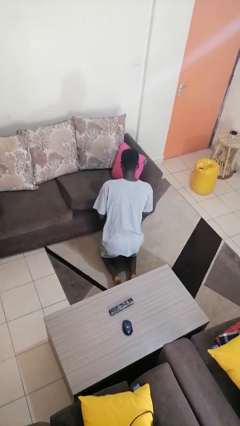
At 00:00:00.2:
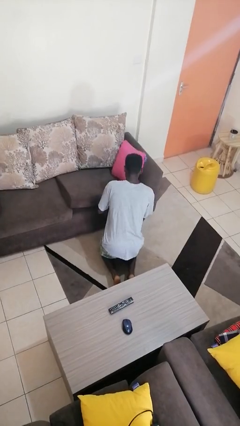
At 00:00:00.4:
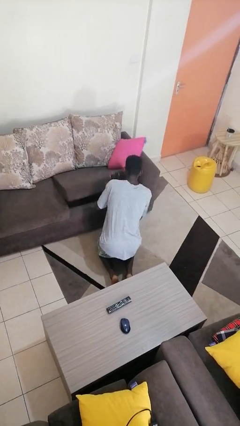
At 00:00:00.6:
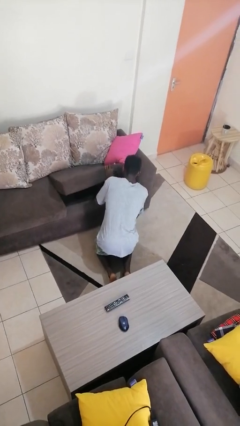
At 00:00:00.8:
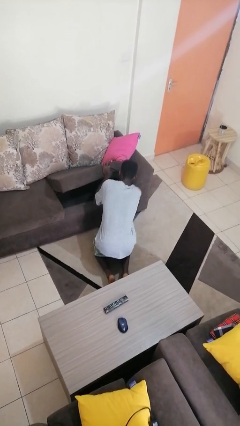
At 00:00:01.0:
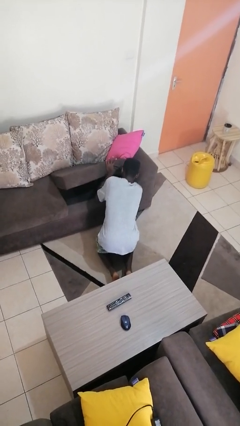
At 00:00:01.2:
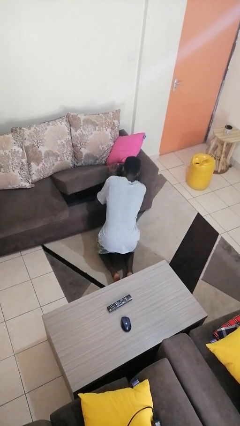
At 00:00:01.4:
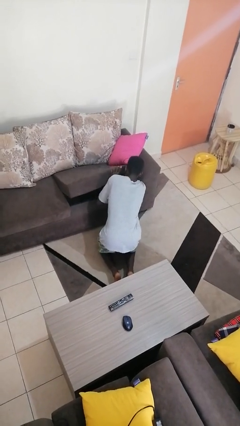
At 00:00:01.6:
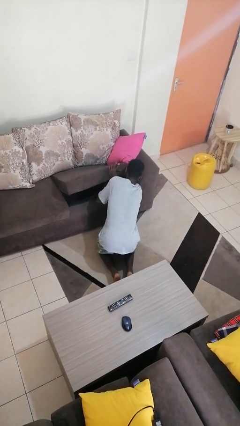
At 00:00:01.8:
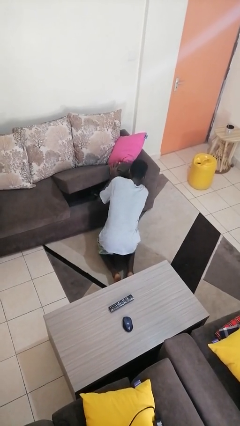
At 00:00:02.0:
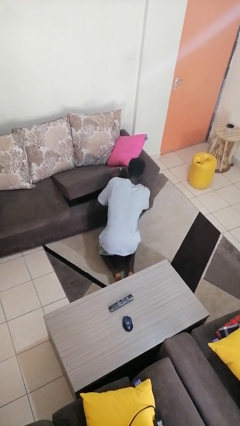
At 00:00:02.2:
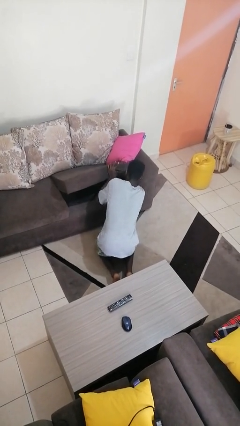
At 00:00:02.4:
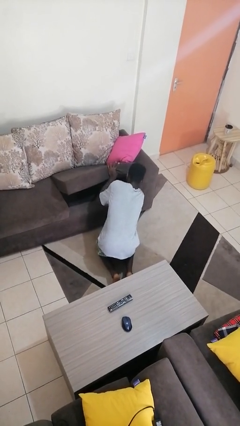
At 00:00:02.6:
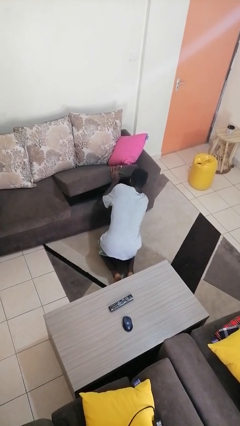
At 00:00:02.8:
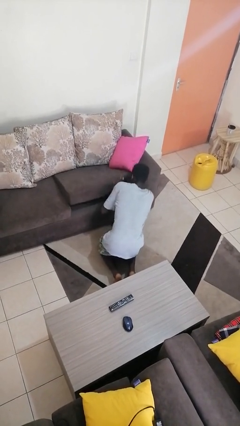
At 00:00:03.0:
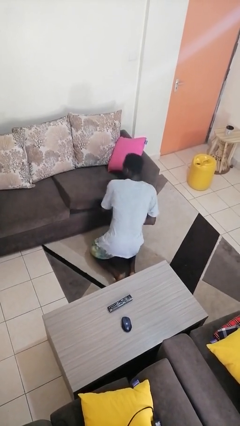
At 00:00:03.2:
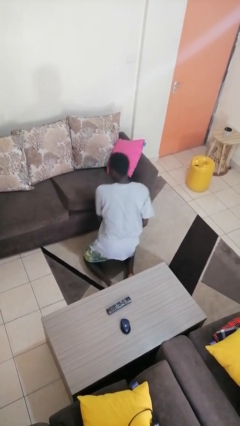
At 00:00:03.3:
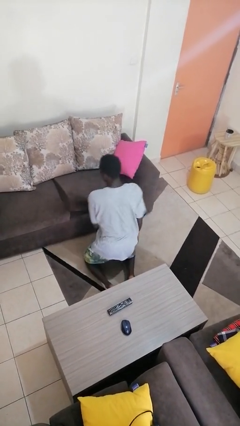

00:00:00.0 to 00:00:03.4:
person searches under couch

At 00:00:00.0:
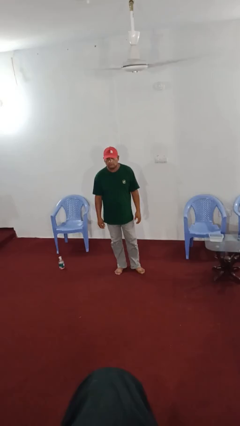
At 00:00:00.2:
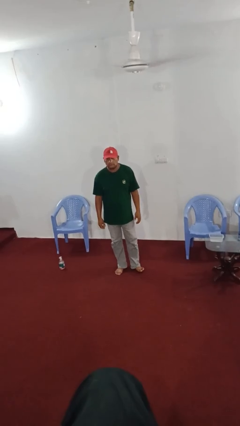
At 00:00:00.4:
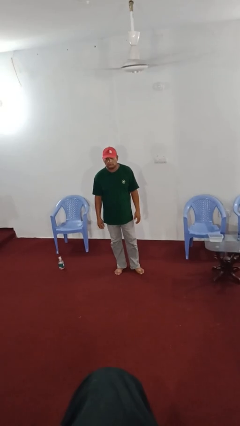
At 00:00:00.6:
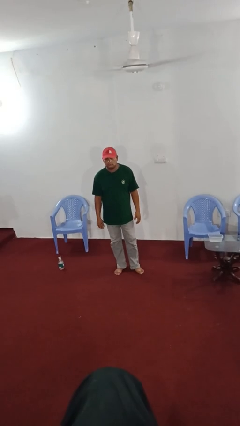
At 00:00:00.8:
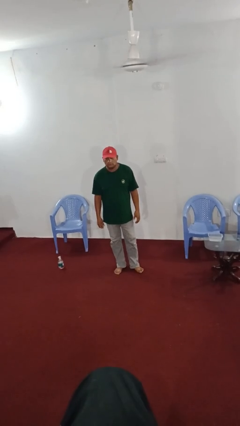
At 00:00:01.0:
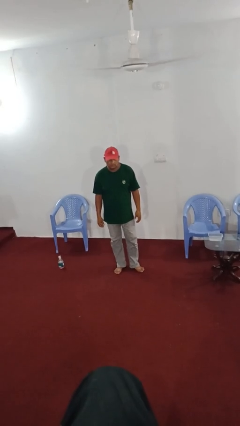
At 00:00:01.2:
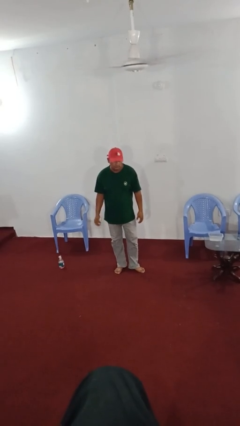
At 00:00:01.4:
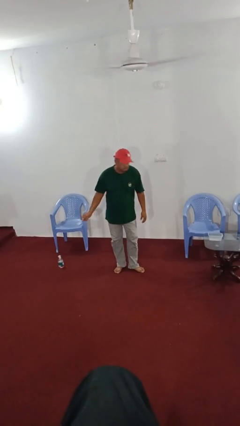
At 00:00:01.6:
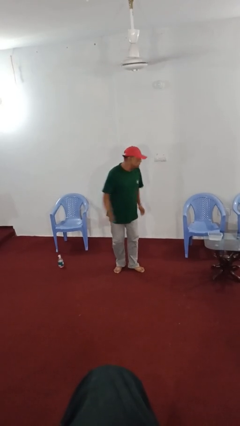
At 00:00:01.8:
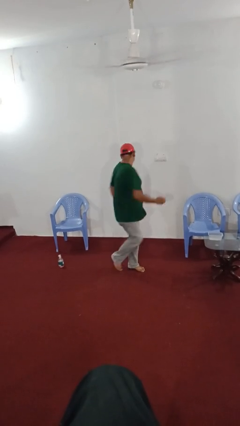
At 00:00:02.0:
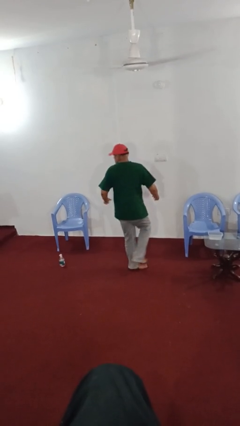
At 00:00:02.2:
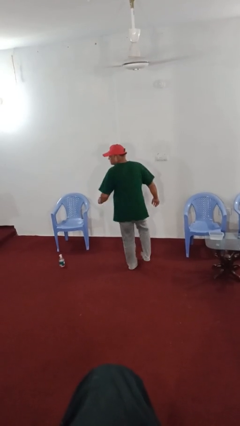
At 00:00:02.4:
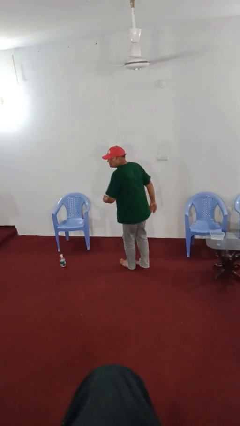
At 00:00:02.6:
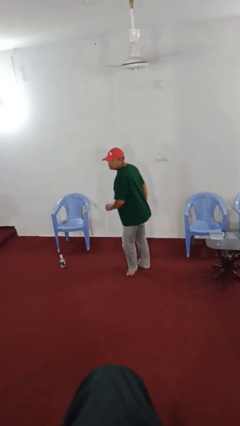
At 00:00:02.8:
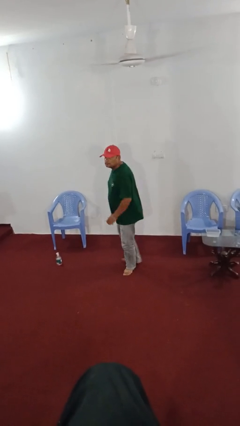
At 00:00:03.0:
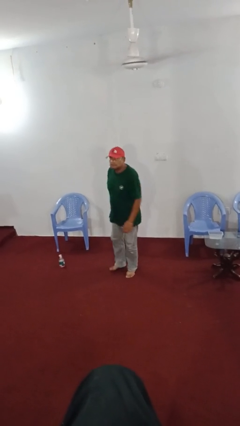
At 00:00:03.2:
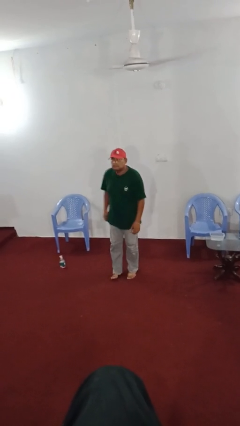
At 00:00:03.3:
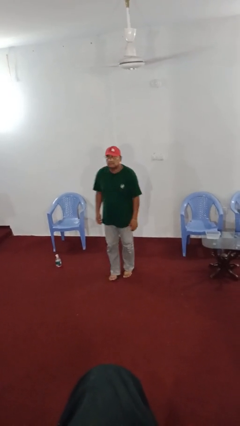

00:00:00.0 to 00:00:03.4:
person twirls

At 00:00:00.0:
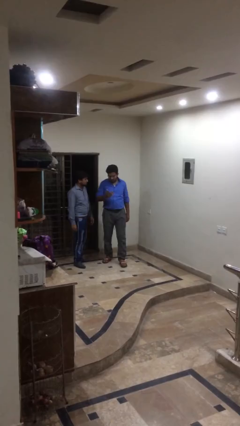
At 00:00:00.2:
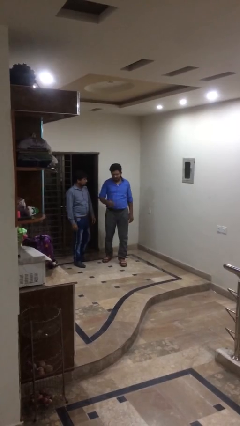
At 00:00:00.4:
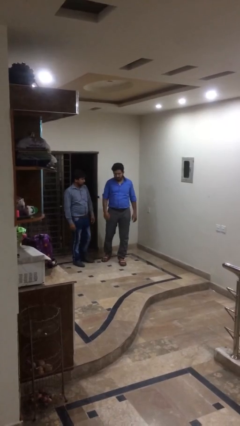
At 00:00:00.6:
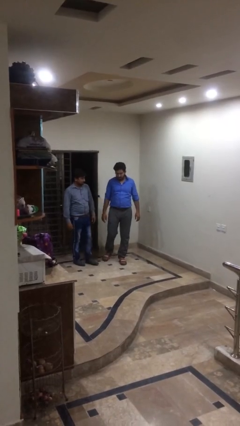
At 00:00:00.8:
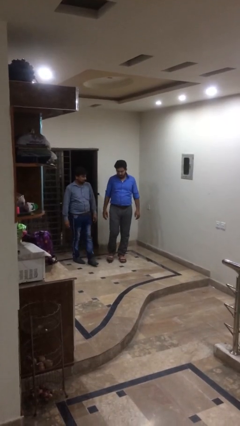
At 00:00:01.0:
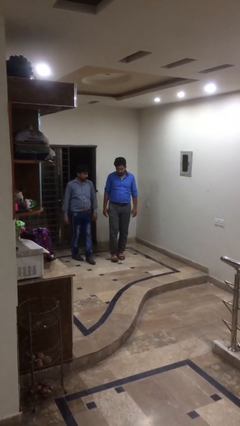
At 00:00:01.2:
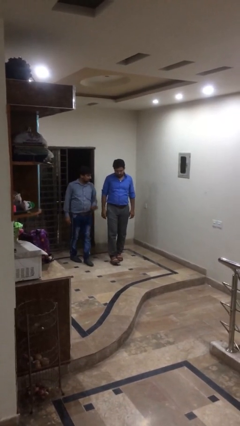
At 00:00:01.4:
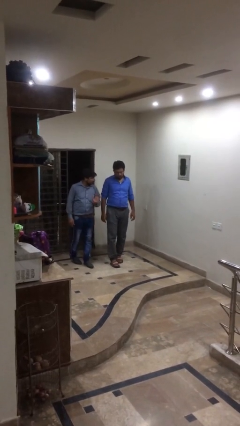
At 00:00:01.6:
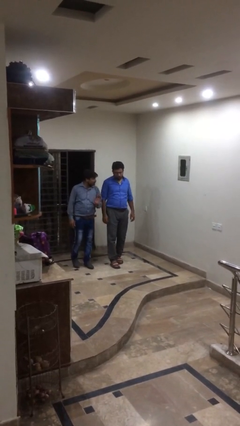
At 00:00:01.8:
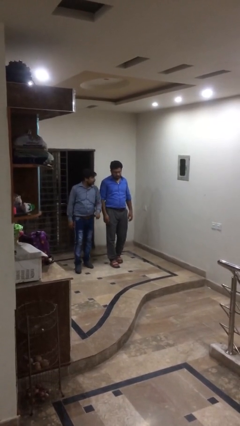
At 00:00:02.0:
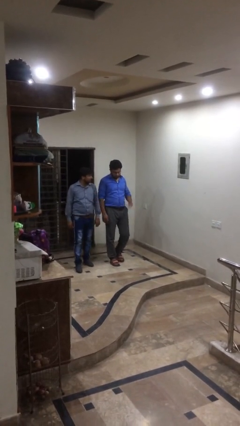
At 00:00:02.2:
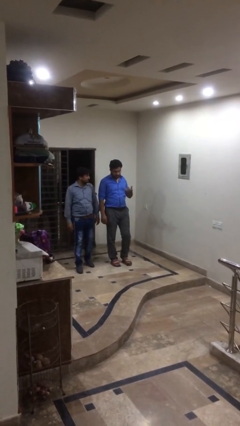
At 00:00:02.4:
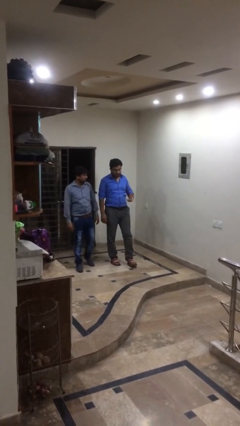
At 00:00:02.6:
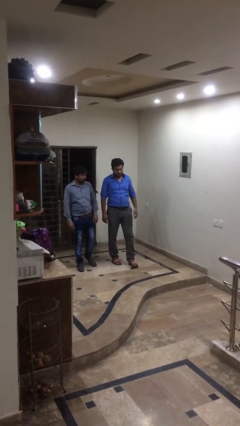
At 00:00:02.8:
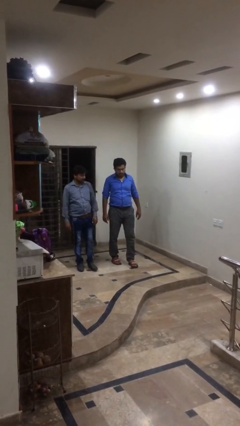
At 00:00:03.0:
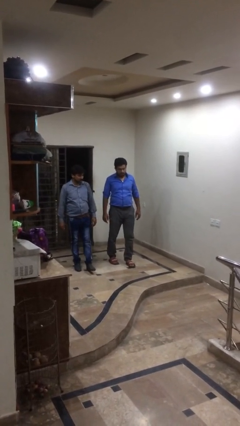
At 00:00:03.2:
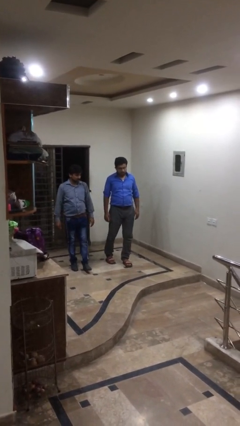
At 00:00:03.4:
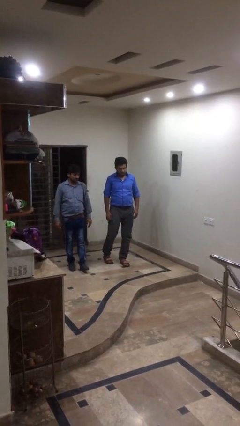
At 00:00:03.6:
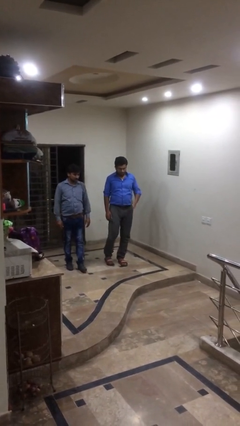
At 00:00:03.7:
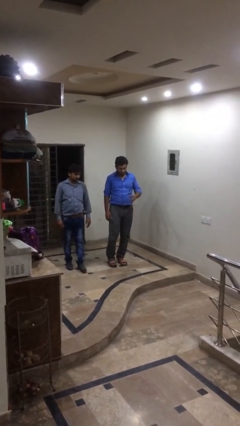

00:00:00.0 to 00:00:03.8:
person talks to person

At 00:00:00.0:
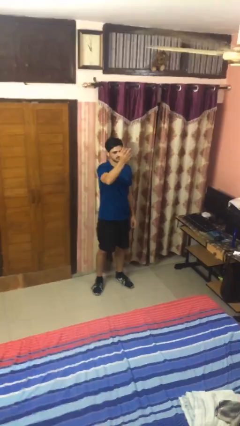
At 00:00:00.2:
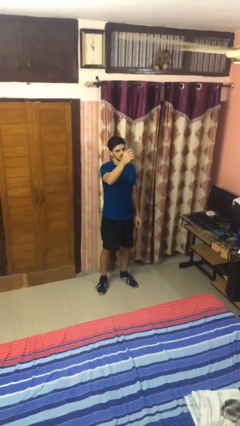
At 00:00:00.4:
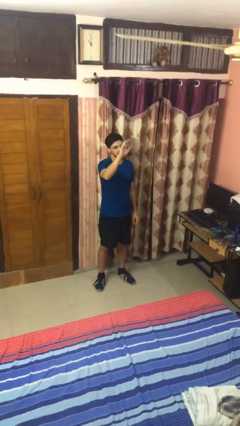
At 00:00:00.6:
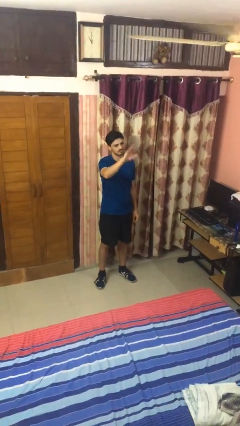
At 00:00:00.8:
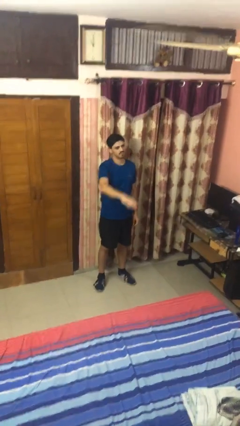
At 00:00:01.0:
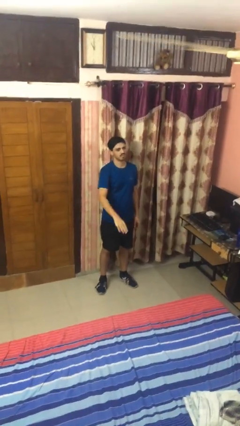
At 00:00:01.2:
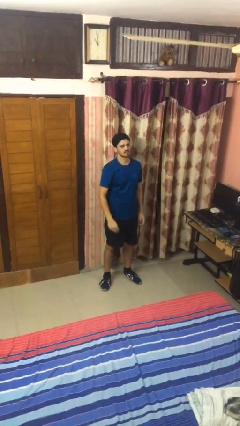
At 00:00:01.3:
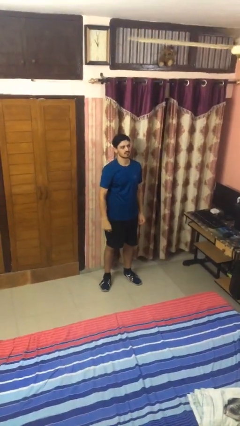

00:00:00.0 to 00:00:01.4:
person gestures swipe down

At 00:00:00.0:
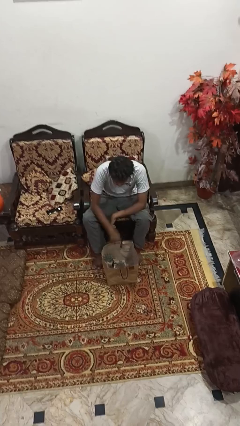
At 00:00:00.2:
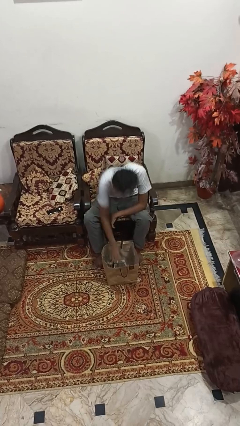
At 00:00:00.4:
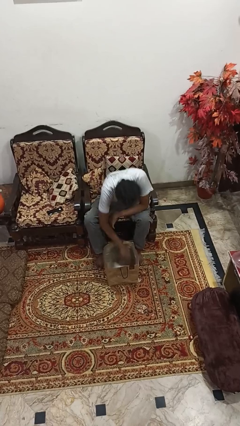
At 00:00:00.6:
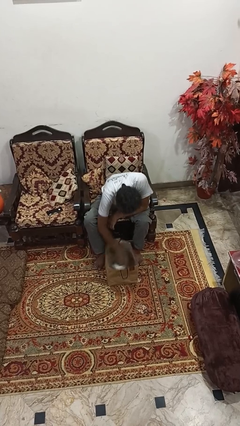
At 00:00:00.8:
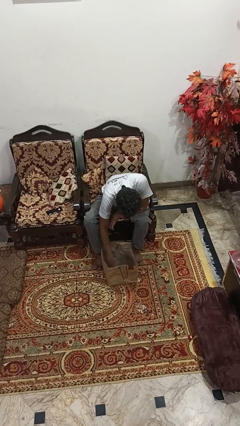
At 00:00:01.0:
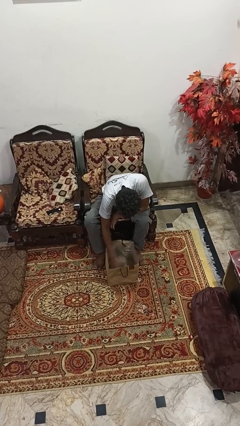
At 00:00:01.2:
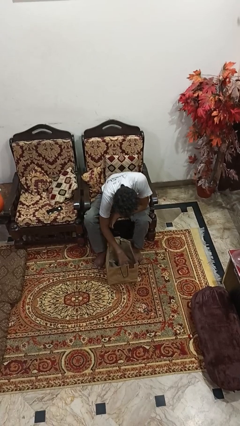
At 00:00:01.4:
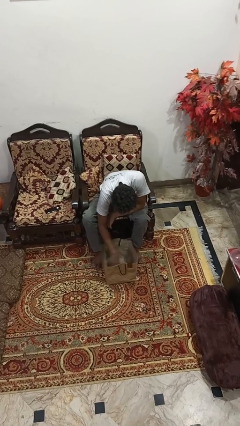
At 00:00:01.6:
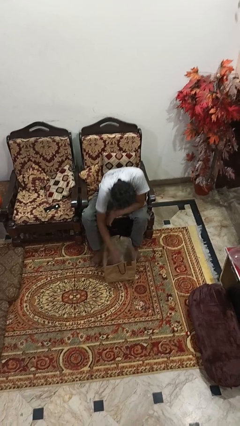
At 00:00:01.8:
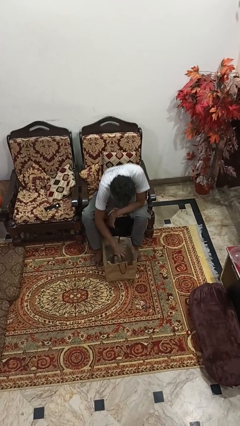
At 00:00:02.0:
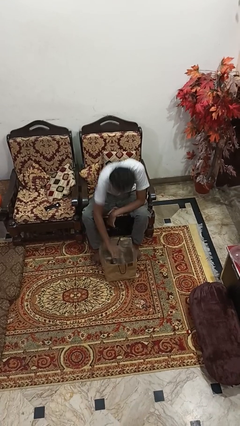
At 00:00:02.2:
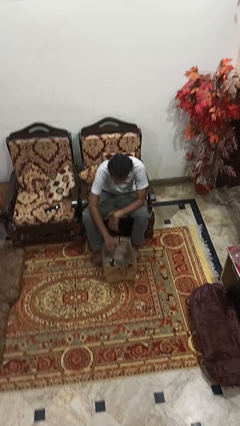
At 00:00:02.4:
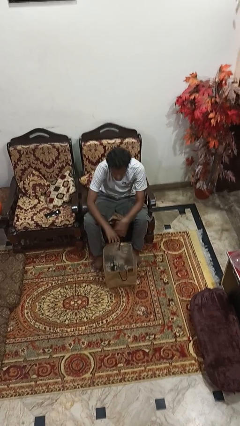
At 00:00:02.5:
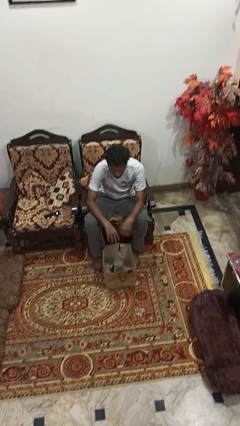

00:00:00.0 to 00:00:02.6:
person searches in bag

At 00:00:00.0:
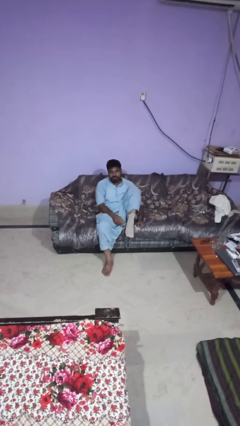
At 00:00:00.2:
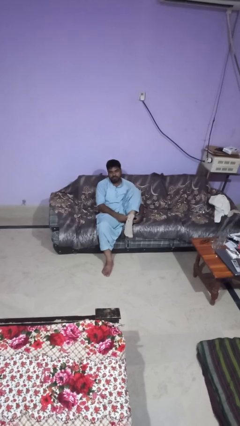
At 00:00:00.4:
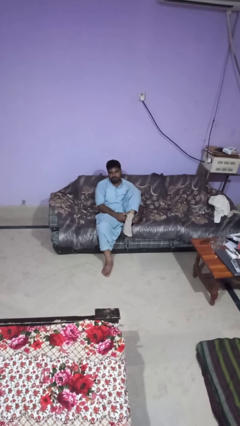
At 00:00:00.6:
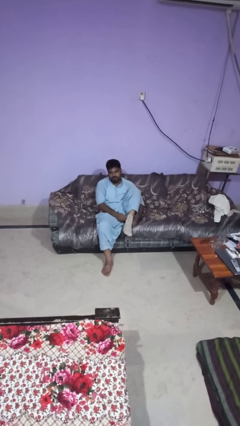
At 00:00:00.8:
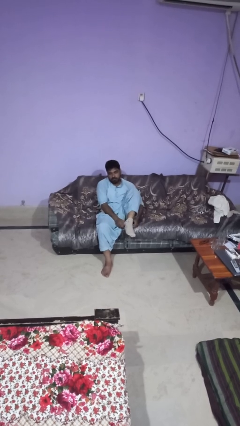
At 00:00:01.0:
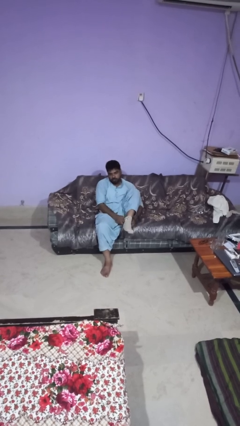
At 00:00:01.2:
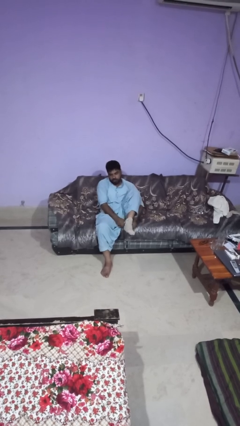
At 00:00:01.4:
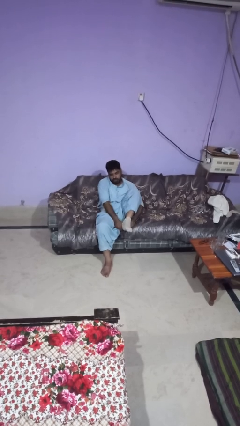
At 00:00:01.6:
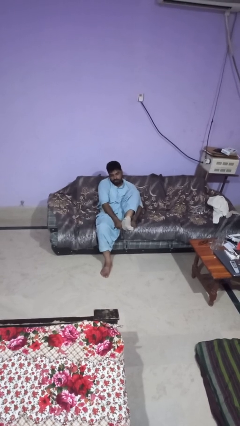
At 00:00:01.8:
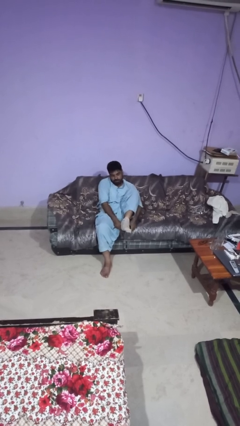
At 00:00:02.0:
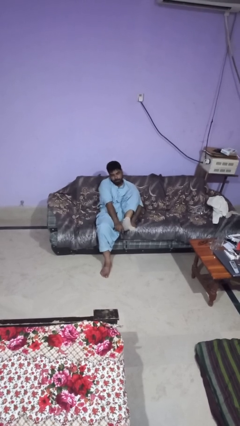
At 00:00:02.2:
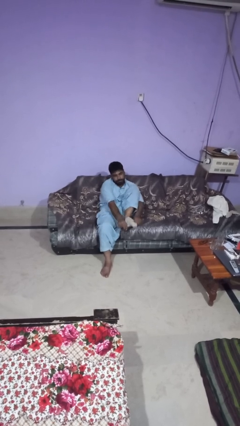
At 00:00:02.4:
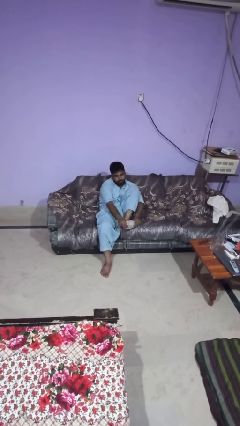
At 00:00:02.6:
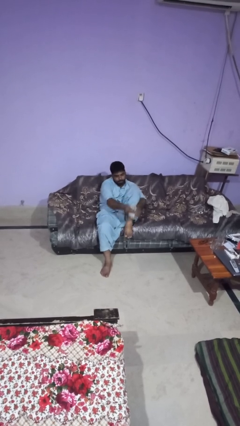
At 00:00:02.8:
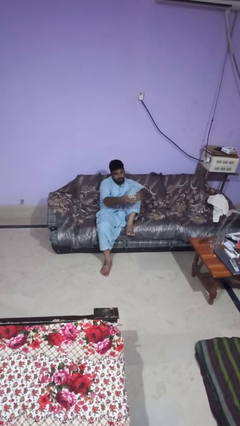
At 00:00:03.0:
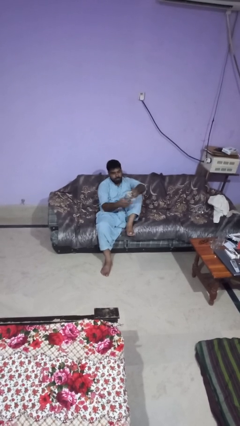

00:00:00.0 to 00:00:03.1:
person takes off socks
